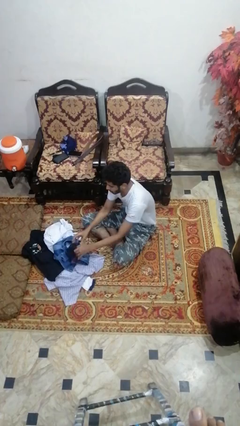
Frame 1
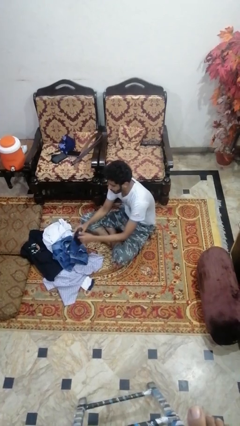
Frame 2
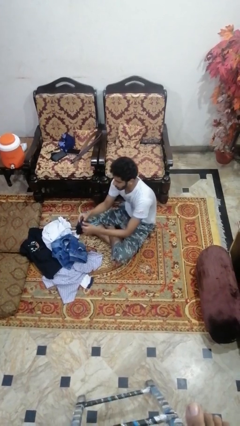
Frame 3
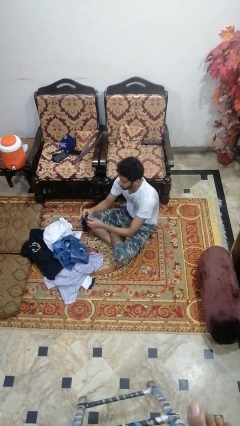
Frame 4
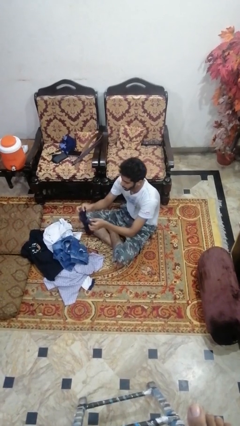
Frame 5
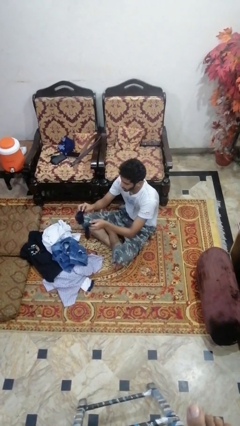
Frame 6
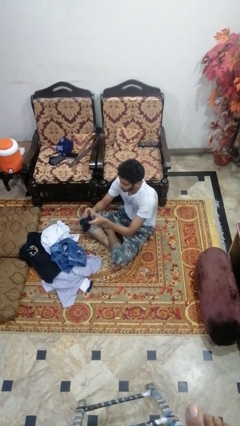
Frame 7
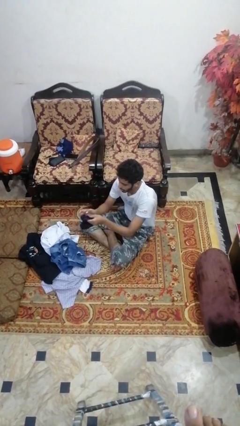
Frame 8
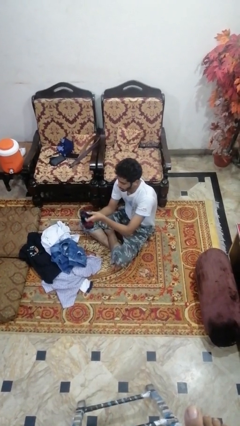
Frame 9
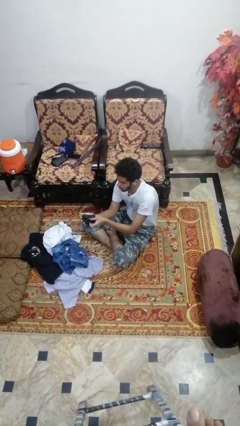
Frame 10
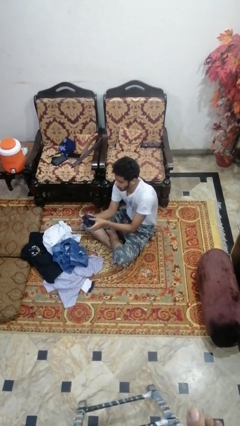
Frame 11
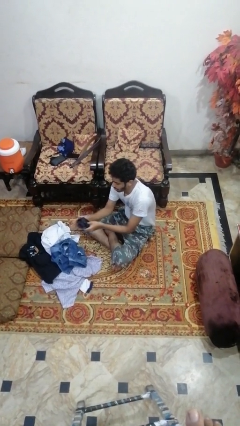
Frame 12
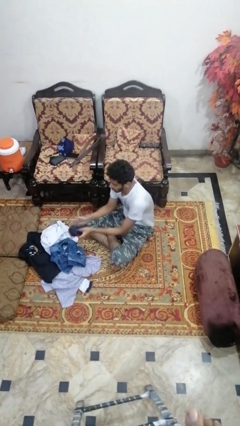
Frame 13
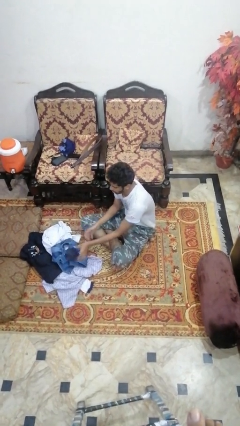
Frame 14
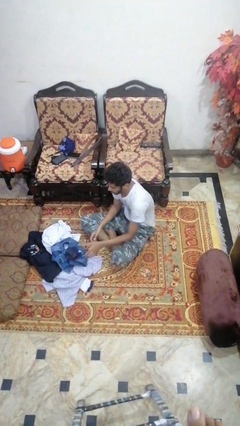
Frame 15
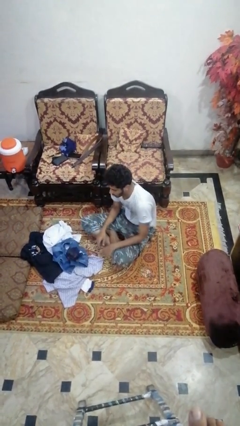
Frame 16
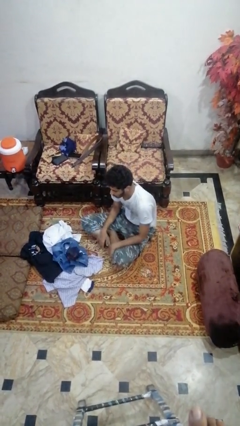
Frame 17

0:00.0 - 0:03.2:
person folds socks

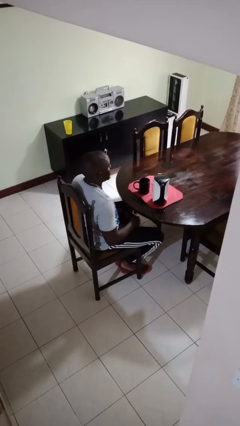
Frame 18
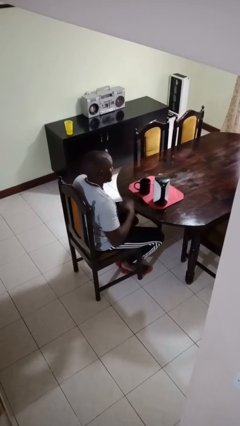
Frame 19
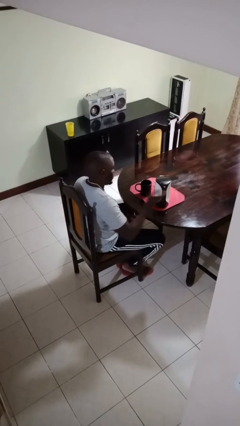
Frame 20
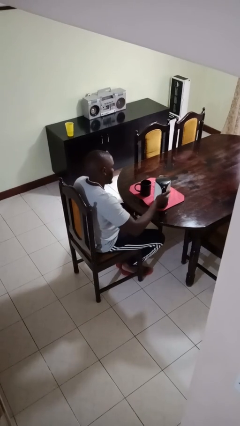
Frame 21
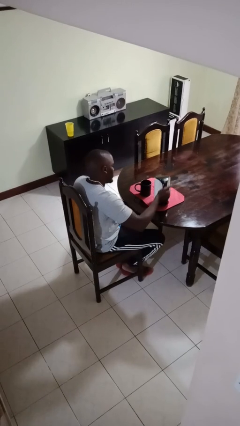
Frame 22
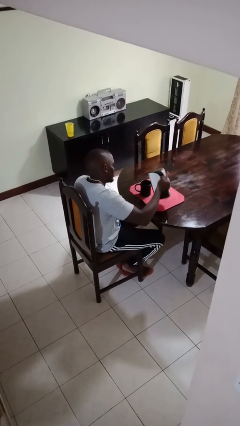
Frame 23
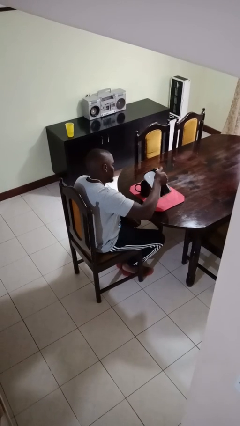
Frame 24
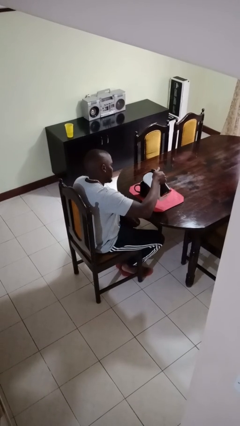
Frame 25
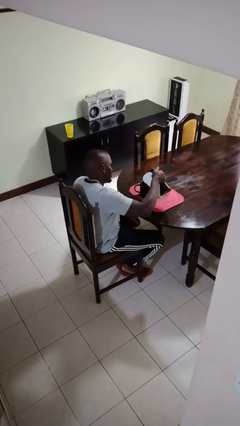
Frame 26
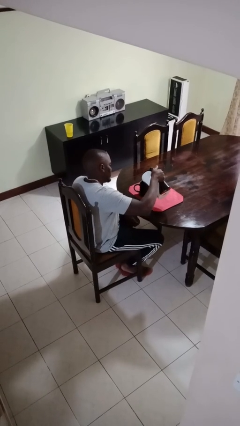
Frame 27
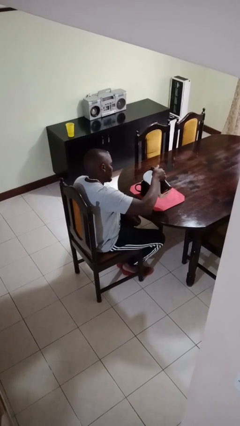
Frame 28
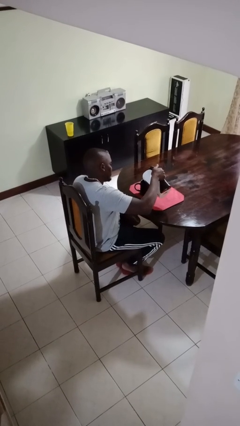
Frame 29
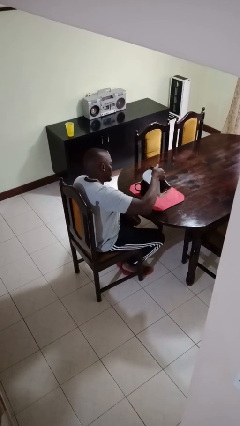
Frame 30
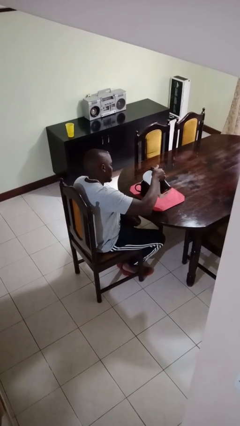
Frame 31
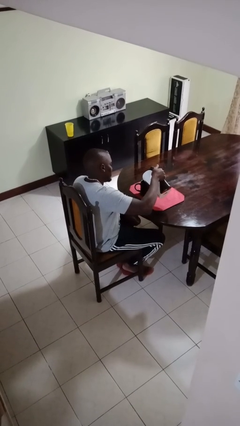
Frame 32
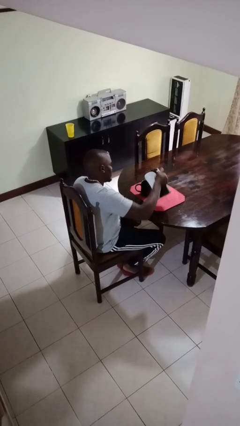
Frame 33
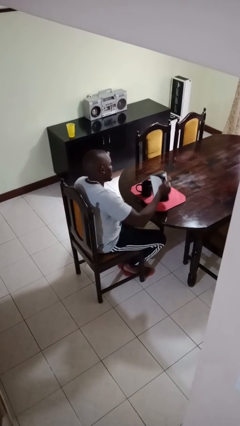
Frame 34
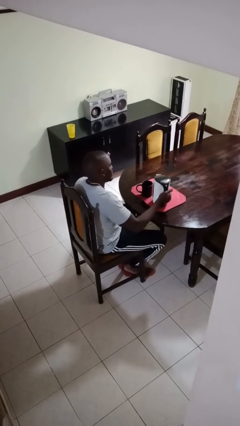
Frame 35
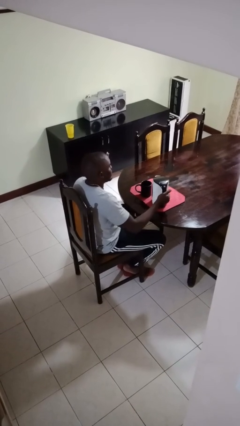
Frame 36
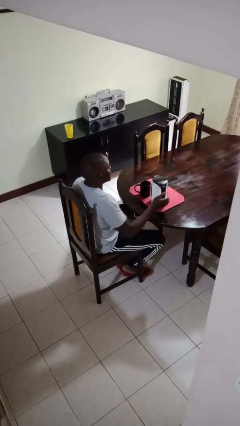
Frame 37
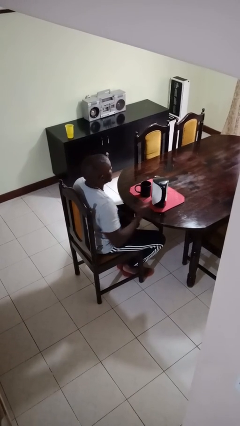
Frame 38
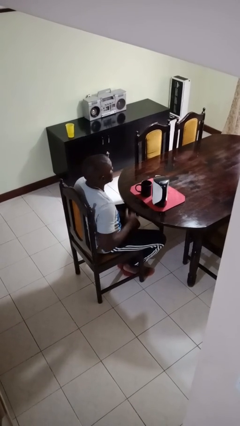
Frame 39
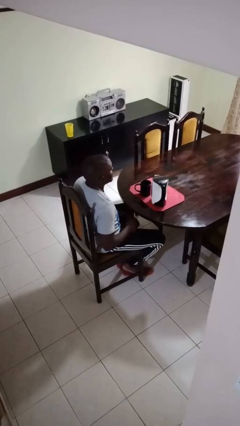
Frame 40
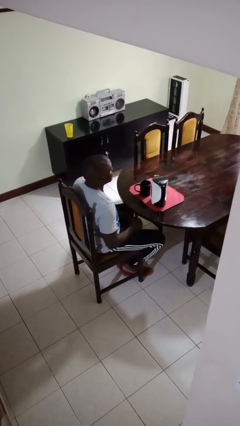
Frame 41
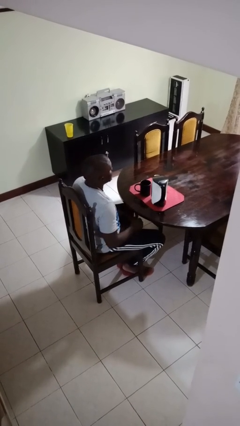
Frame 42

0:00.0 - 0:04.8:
person pours coffee into mug

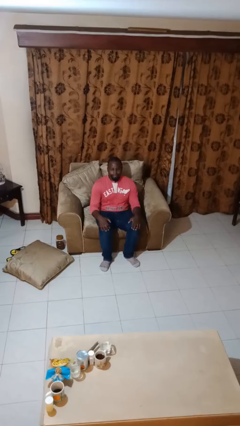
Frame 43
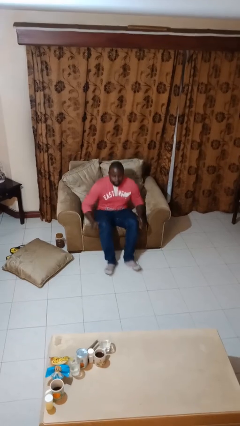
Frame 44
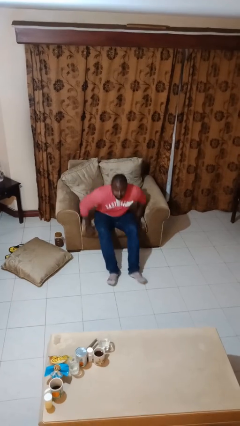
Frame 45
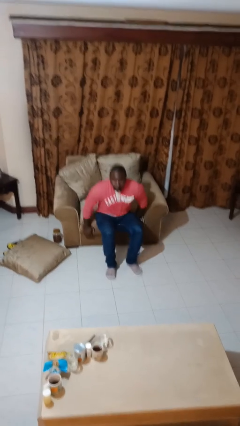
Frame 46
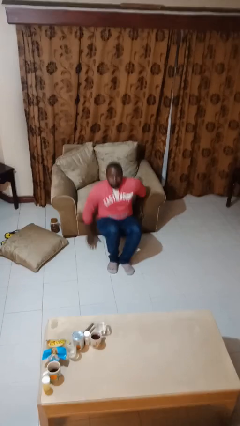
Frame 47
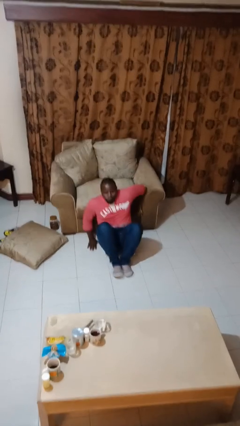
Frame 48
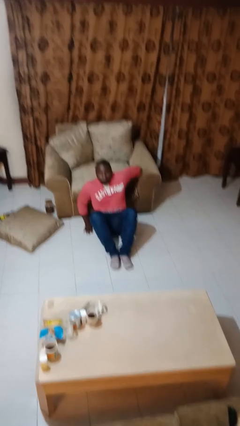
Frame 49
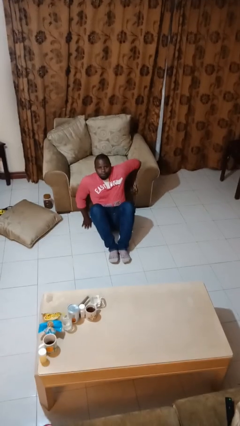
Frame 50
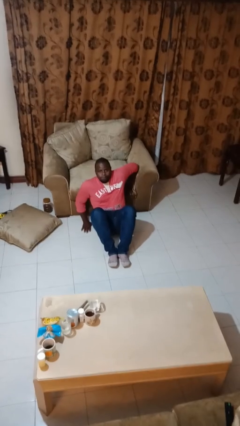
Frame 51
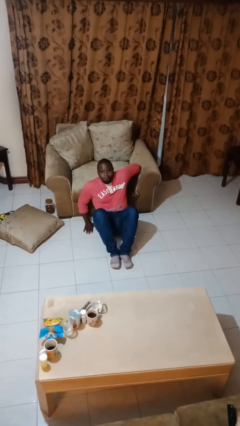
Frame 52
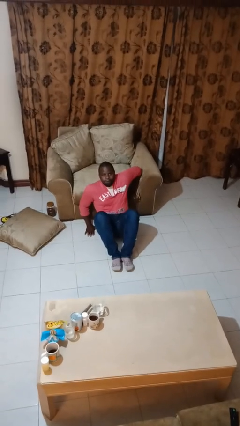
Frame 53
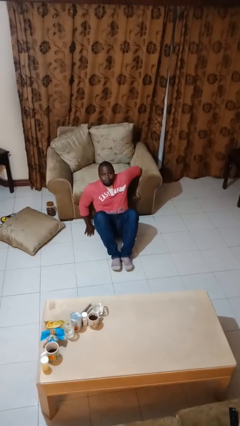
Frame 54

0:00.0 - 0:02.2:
person falls from chair

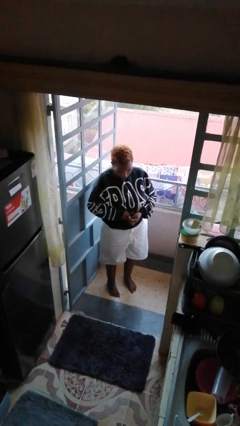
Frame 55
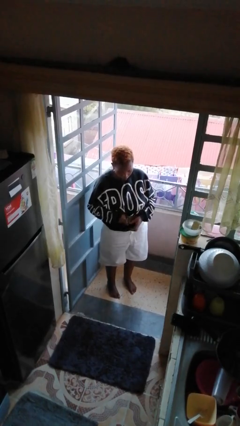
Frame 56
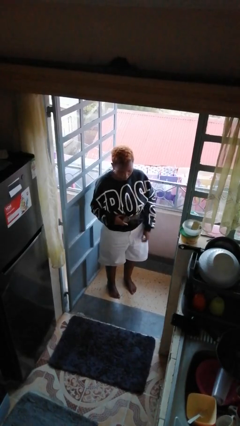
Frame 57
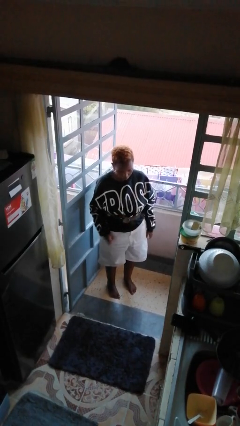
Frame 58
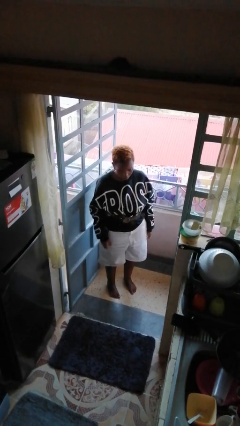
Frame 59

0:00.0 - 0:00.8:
person takes off belt

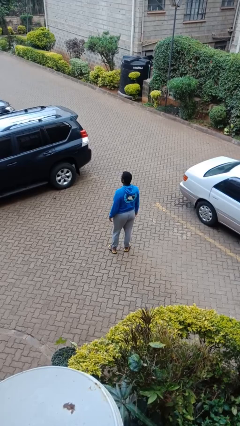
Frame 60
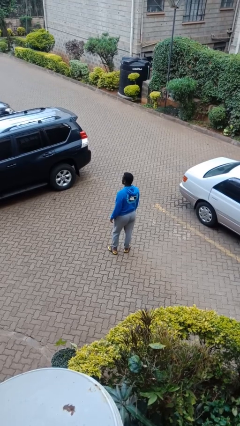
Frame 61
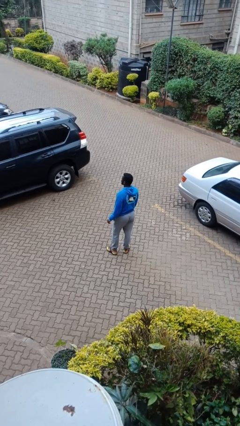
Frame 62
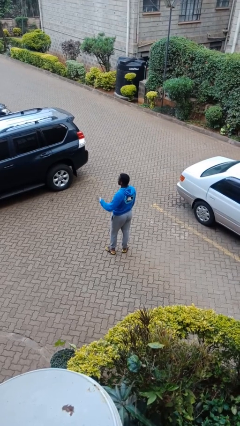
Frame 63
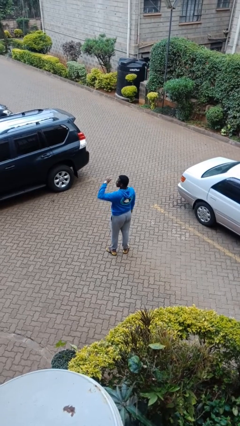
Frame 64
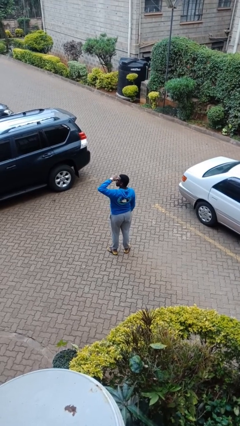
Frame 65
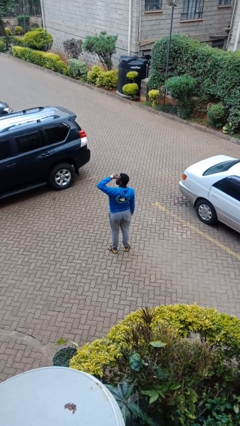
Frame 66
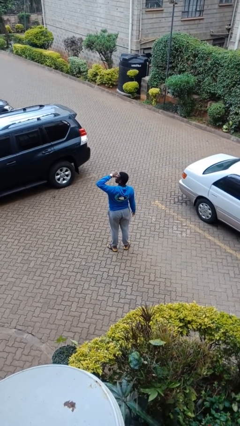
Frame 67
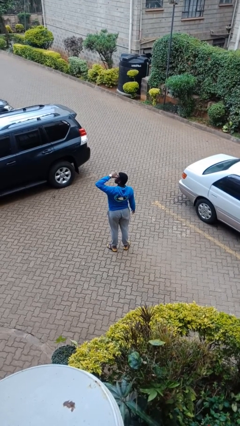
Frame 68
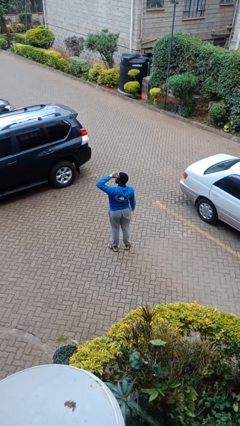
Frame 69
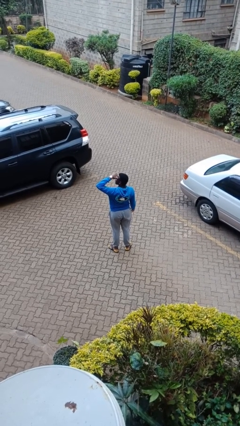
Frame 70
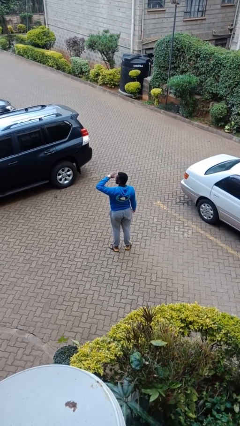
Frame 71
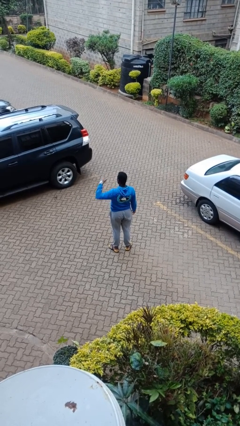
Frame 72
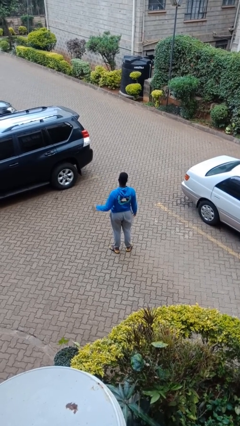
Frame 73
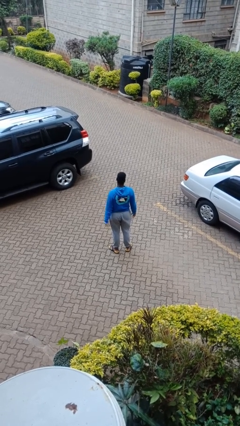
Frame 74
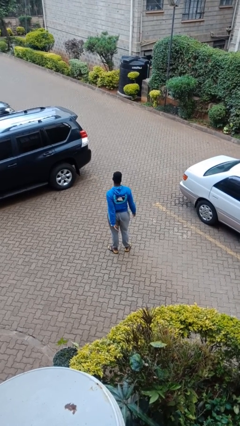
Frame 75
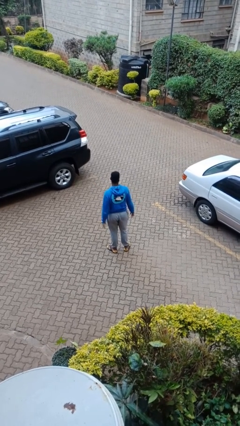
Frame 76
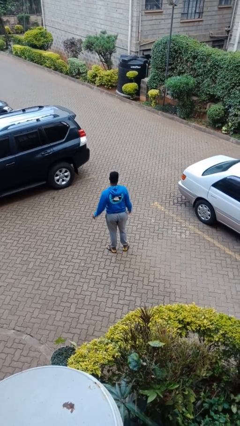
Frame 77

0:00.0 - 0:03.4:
person shades eyes

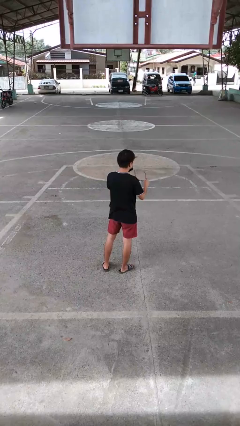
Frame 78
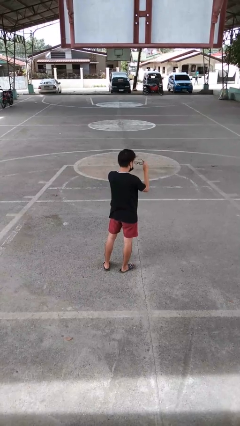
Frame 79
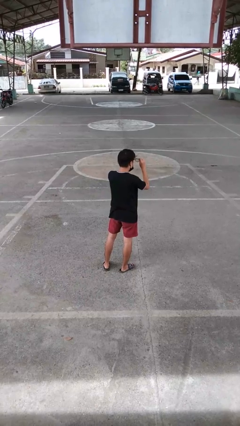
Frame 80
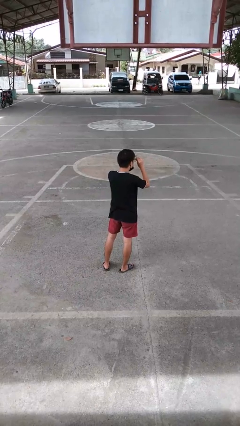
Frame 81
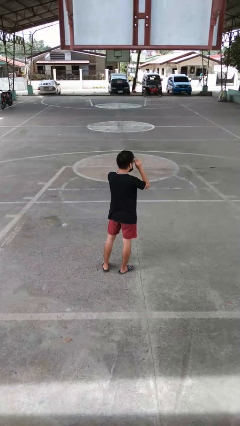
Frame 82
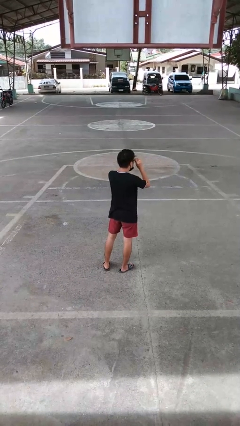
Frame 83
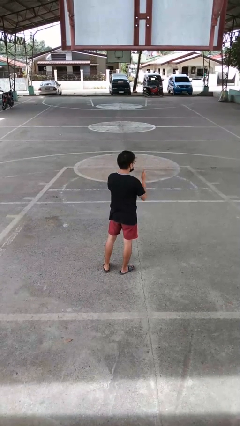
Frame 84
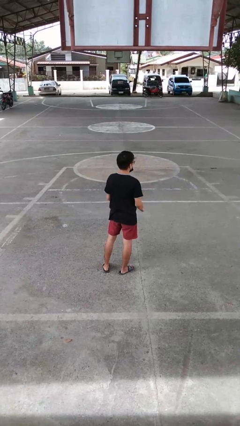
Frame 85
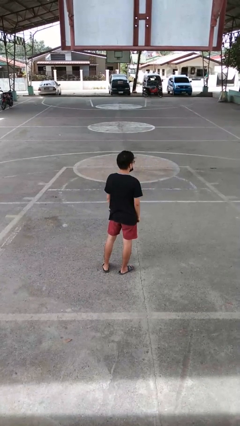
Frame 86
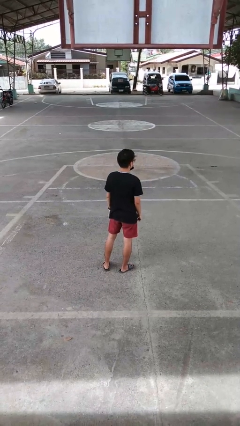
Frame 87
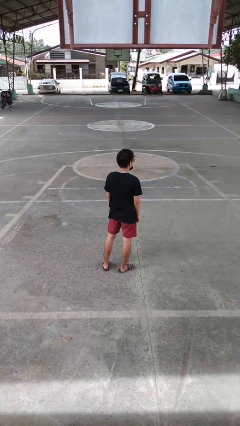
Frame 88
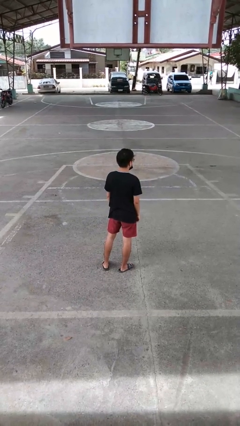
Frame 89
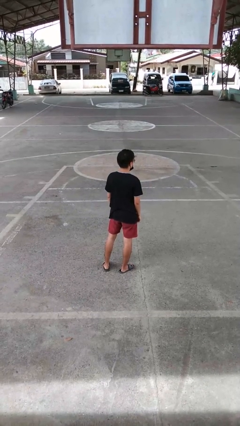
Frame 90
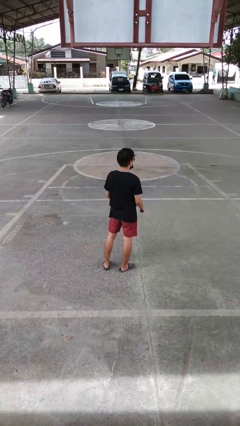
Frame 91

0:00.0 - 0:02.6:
person puts on glasses
